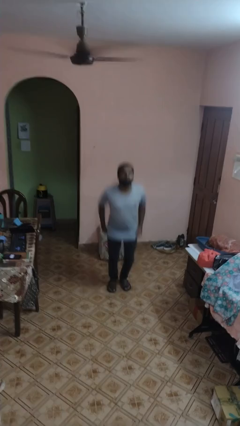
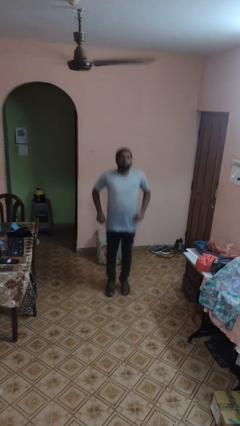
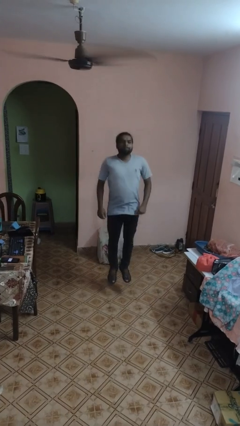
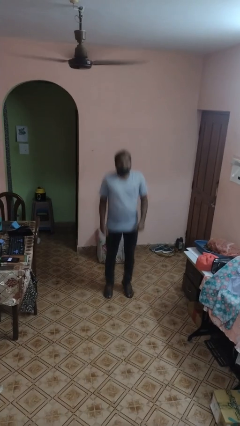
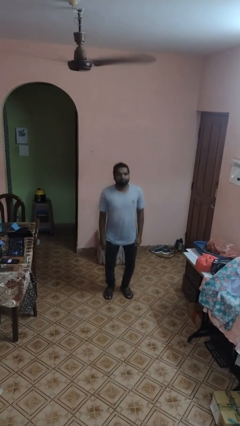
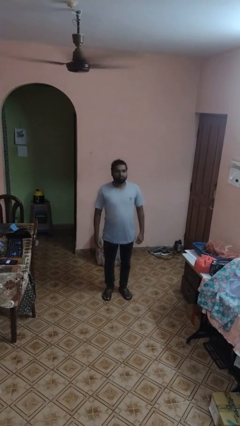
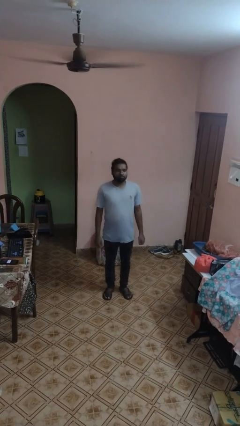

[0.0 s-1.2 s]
person jumps

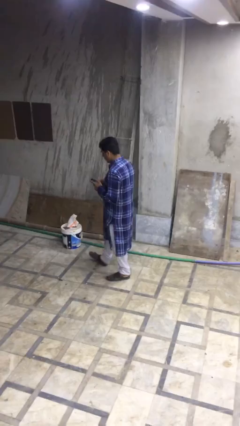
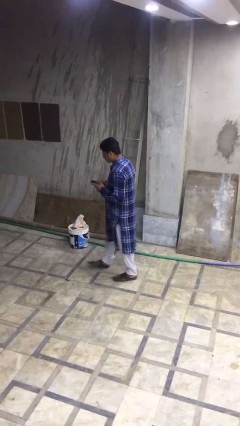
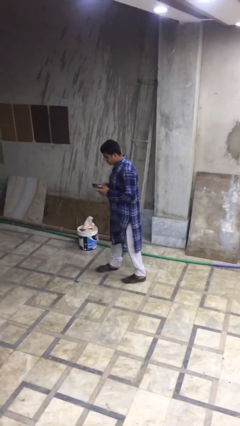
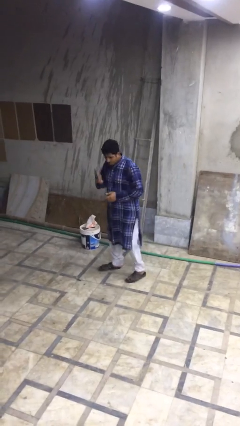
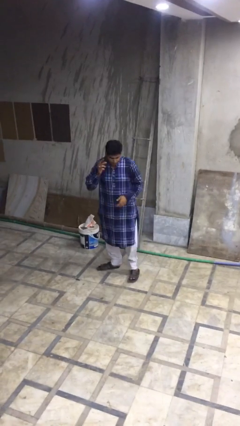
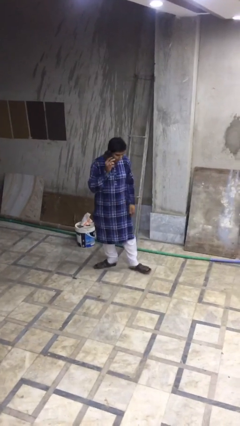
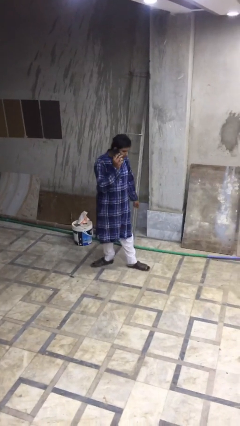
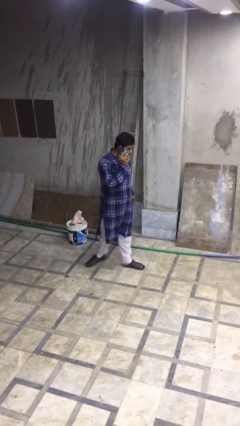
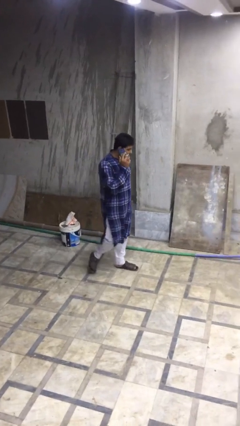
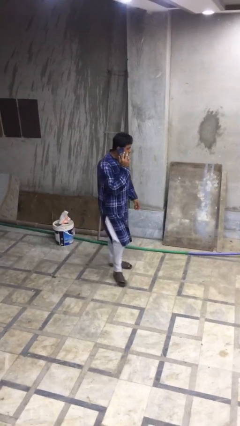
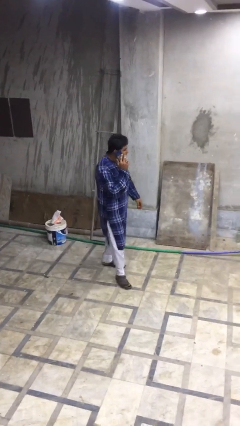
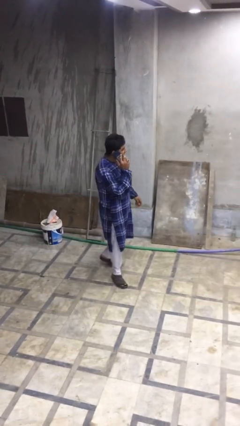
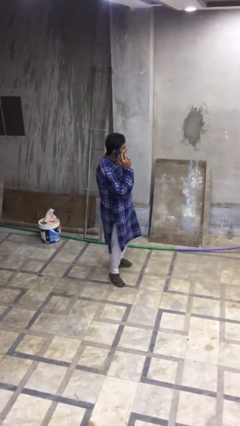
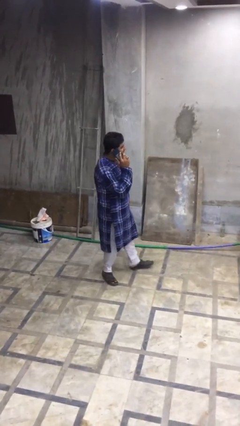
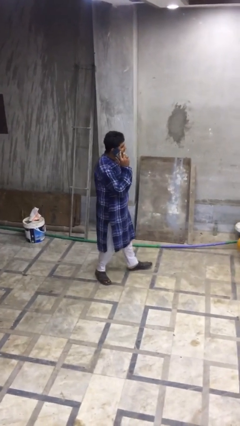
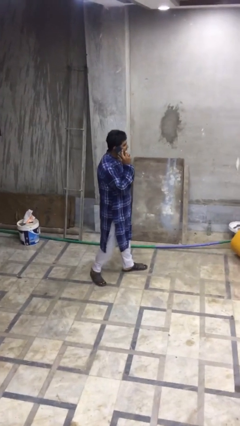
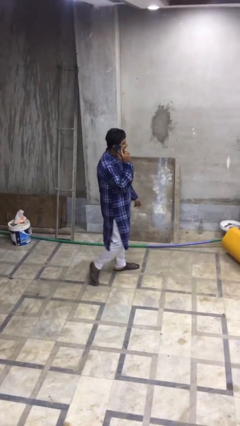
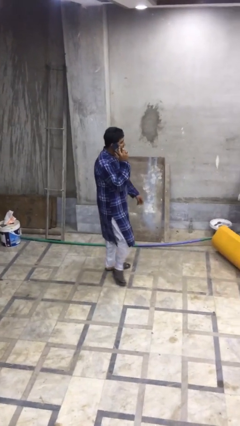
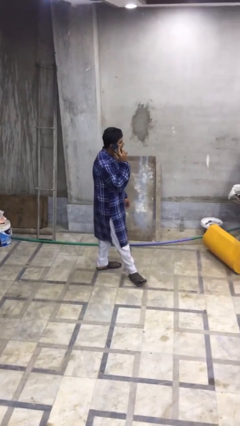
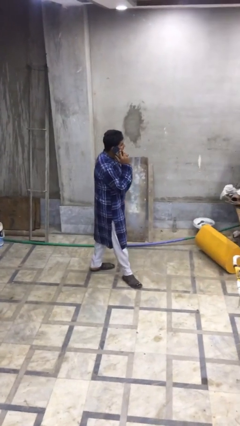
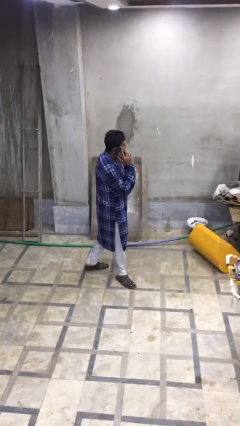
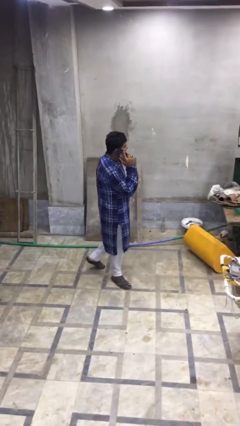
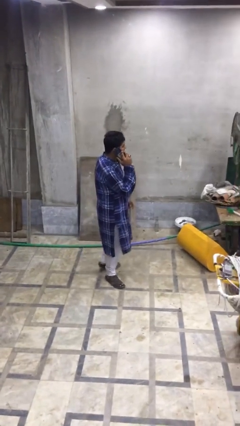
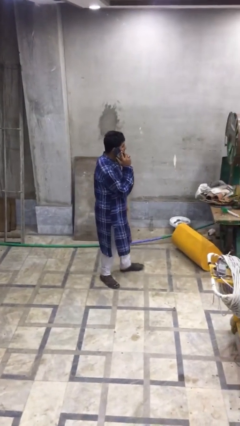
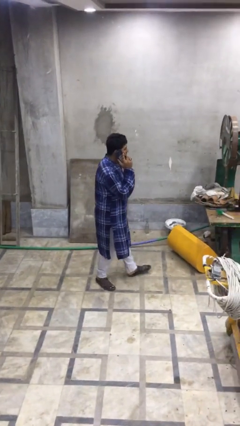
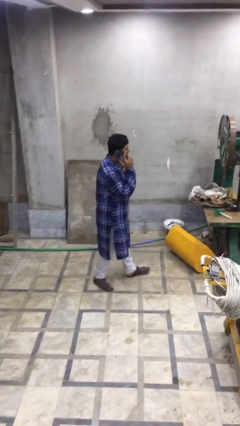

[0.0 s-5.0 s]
person talks on phone

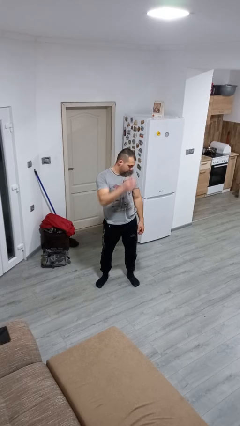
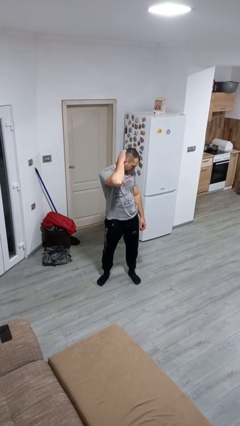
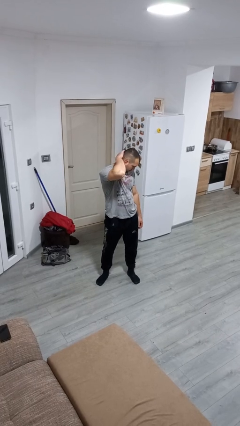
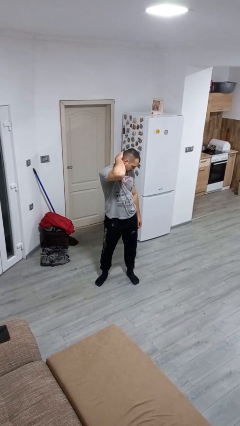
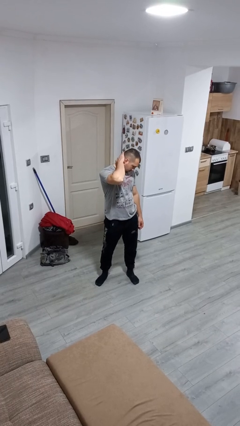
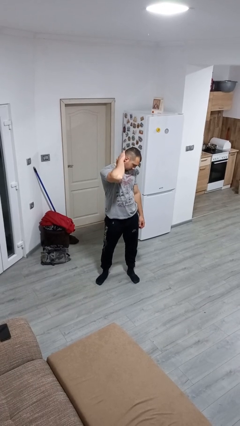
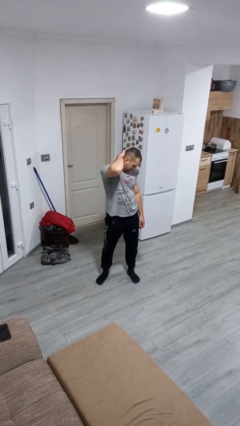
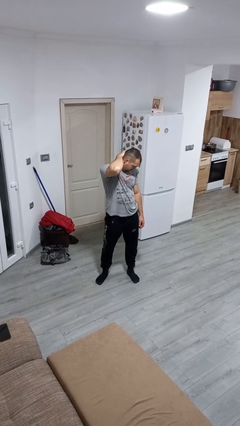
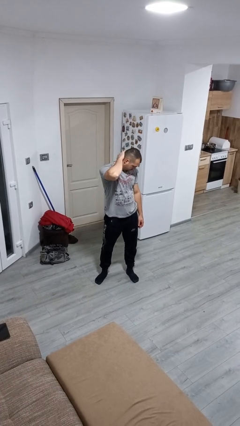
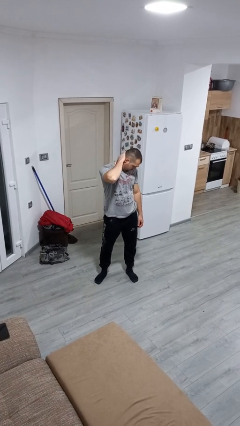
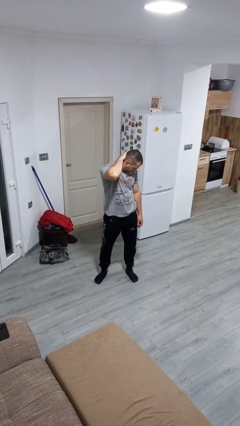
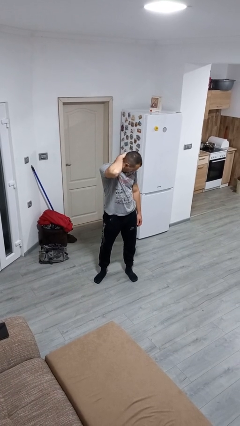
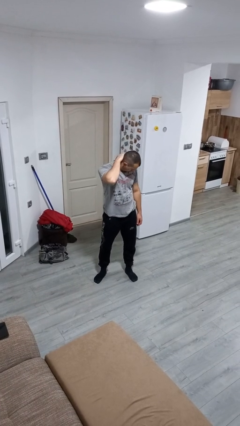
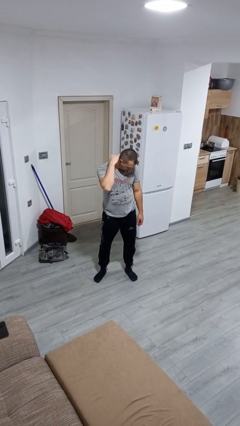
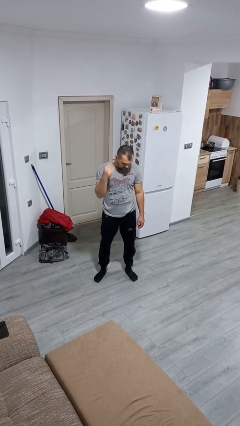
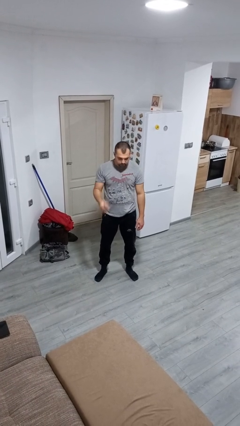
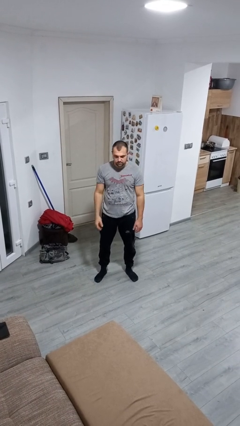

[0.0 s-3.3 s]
person rubs neck

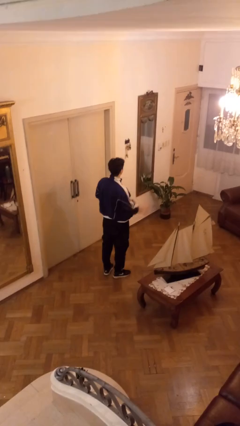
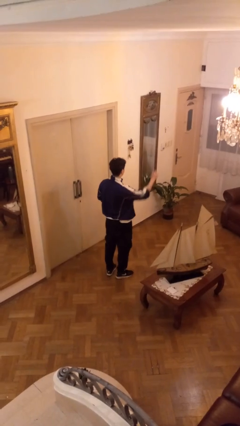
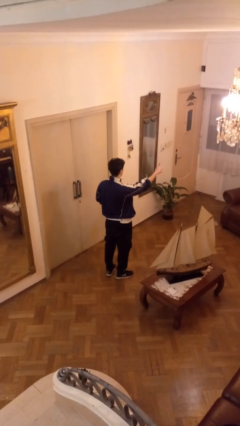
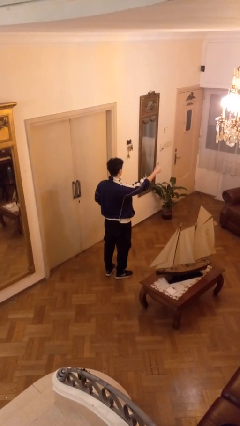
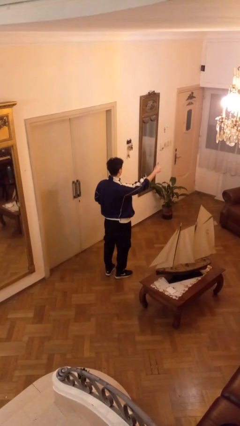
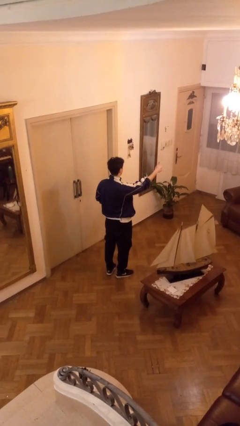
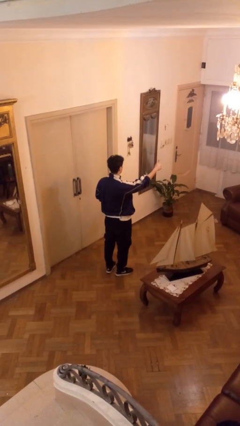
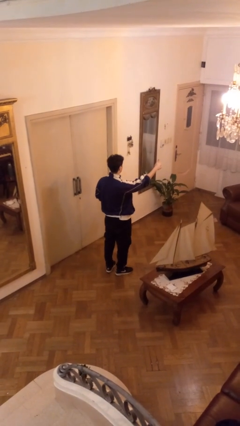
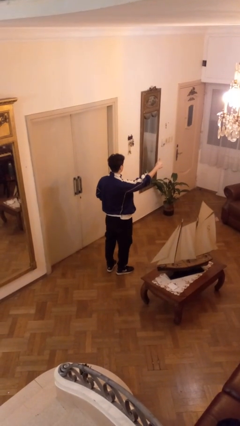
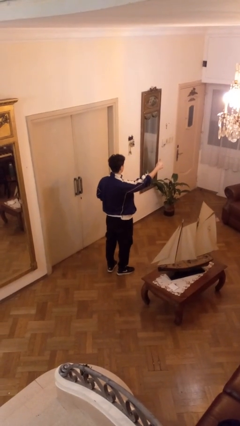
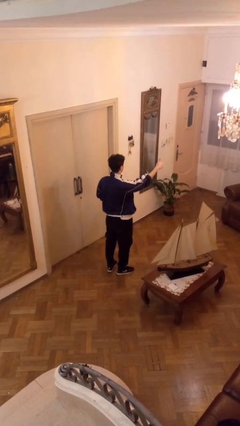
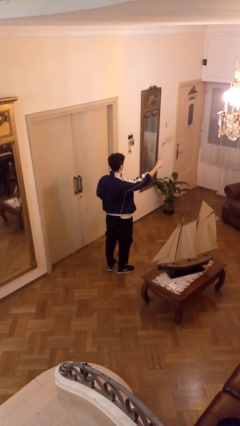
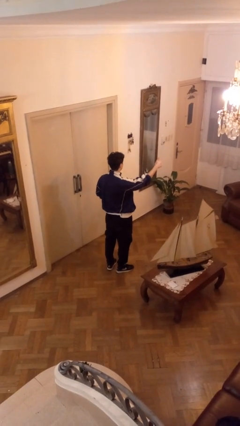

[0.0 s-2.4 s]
person gestures thumbs up

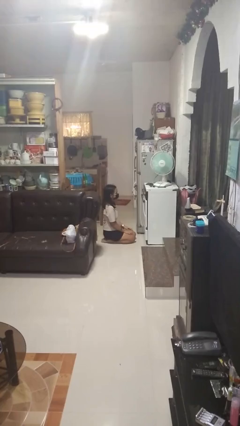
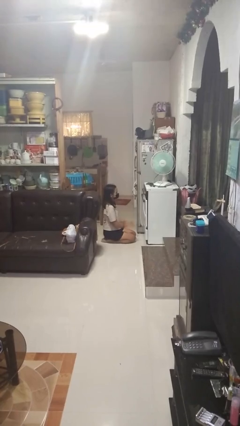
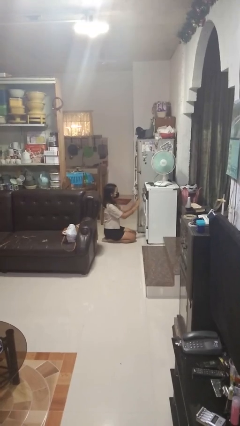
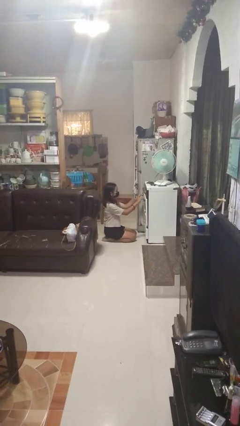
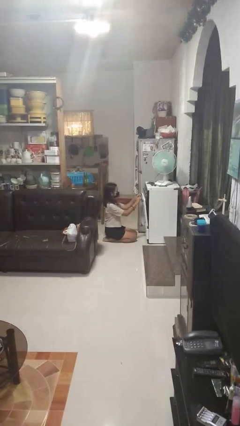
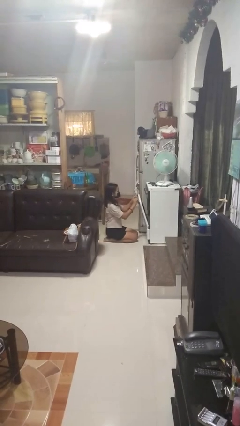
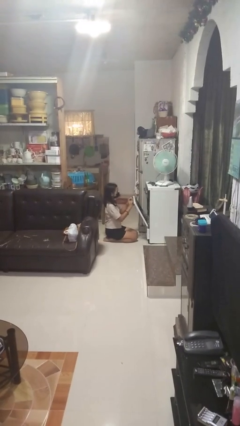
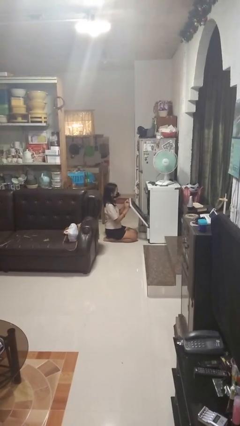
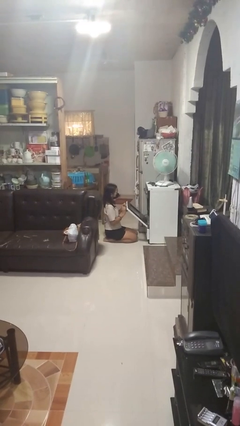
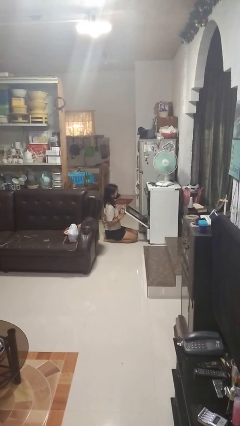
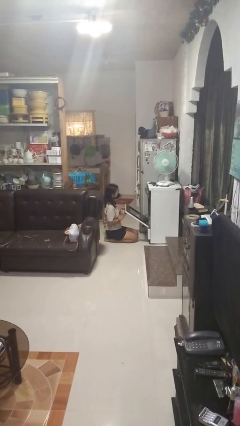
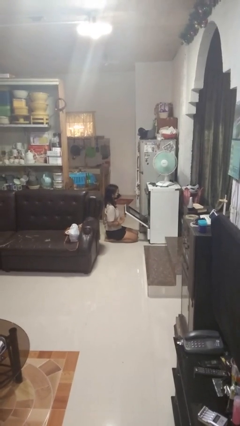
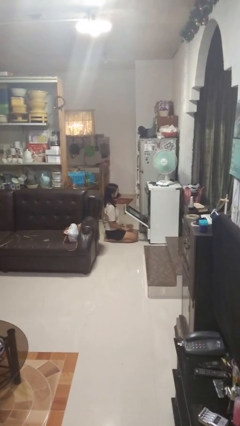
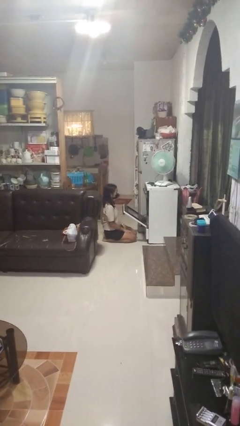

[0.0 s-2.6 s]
person opens oven door

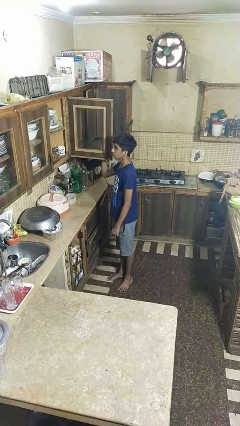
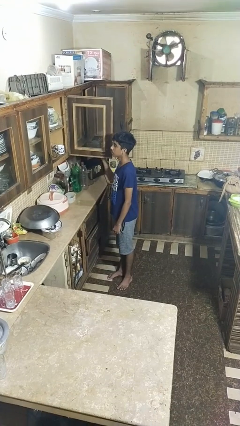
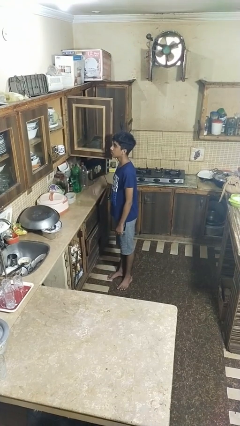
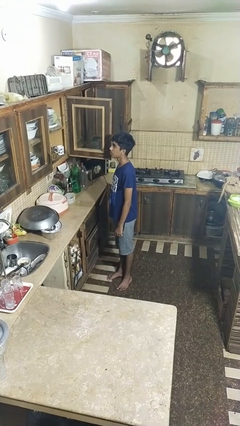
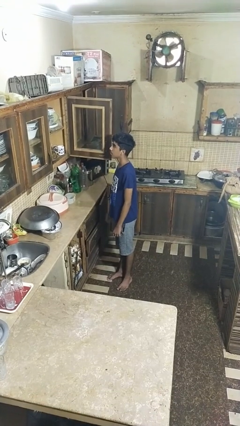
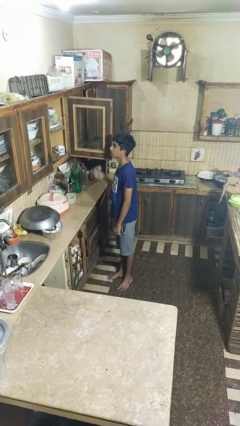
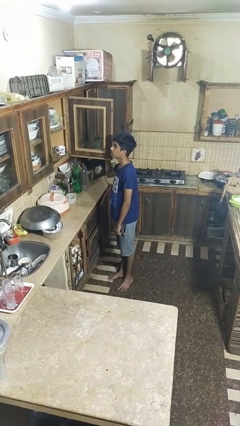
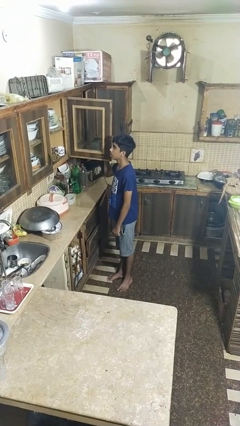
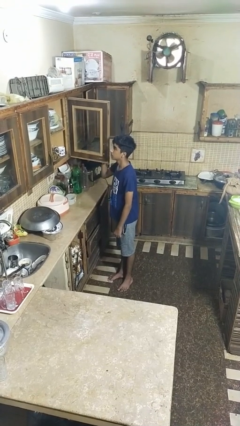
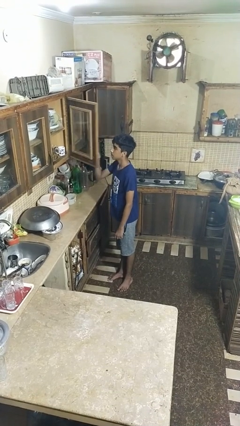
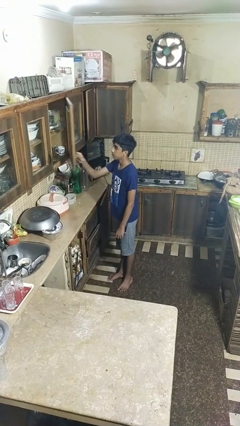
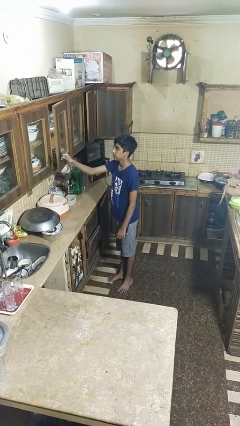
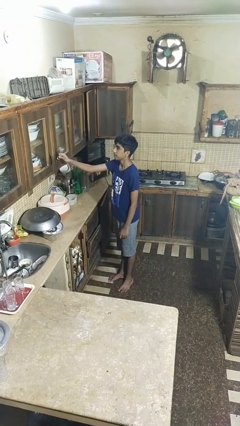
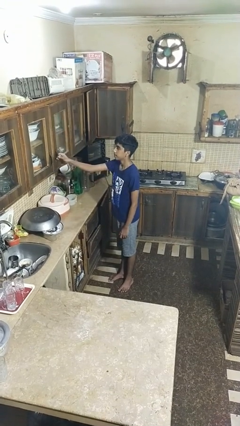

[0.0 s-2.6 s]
person closes cabinet

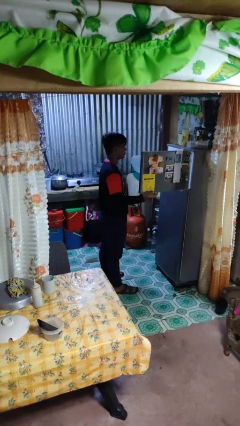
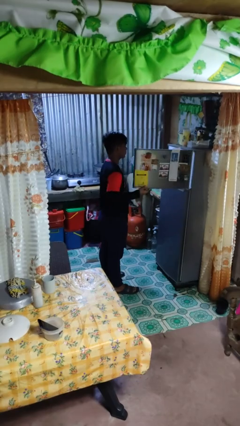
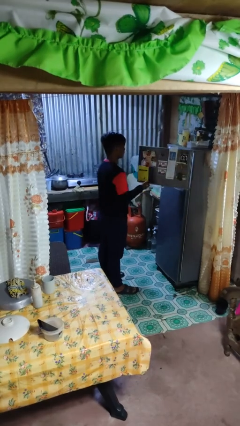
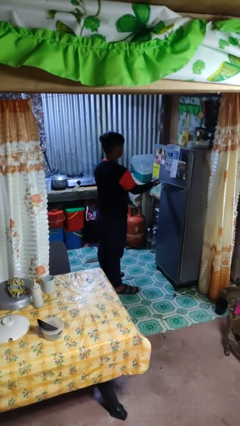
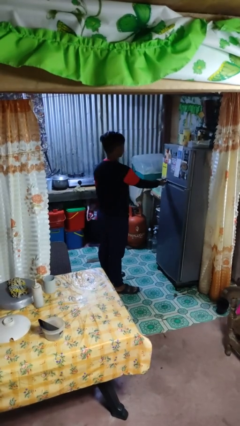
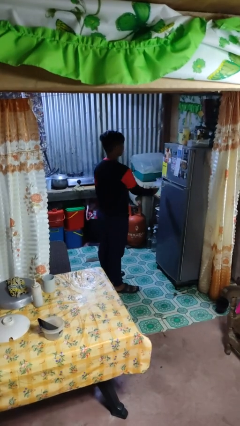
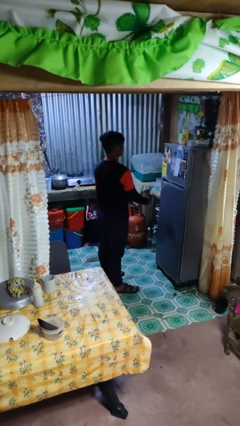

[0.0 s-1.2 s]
person closes refrigerator
